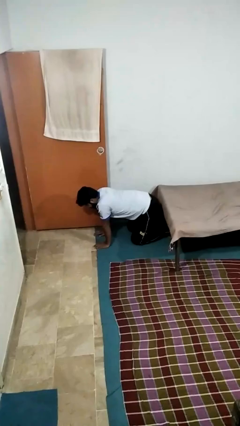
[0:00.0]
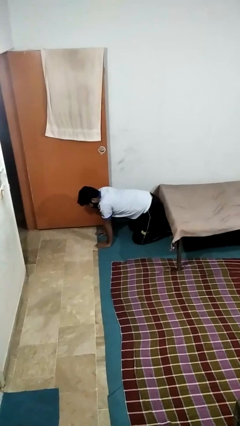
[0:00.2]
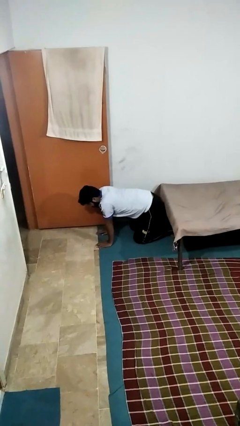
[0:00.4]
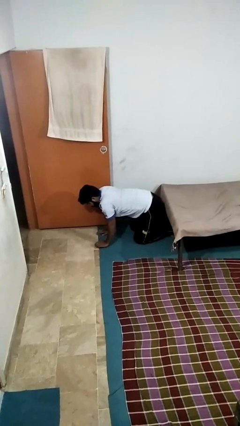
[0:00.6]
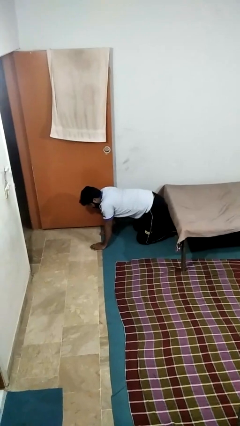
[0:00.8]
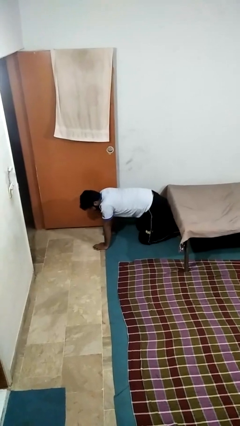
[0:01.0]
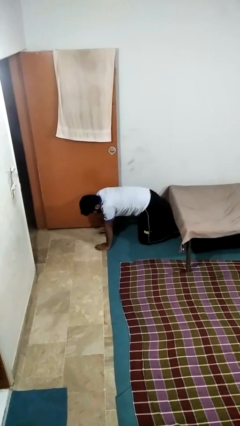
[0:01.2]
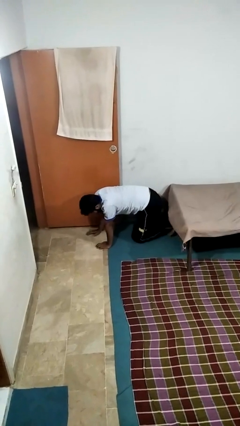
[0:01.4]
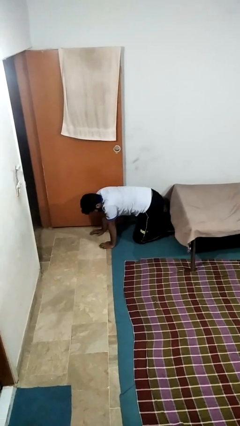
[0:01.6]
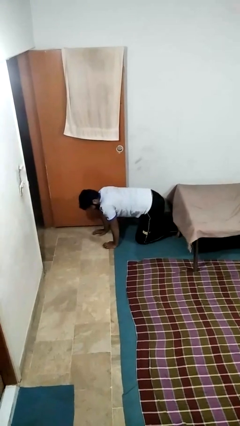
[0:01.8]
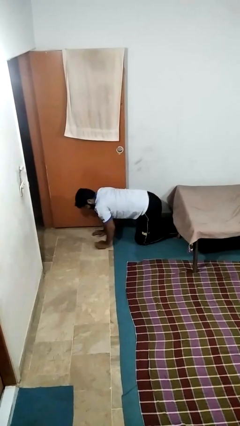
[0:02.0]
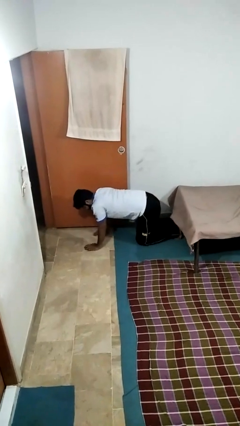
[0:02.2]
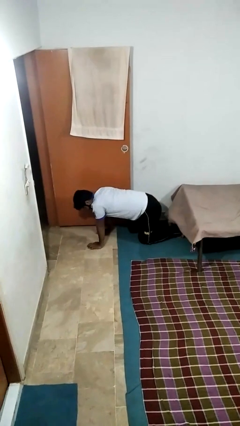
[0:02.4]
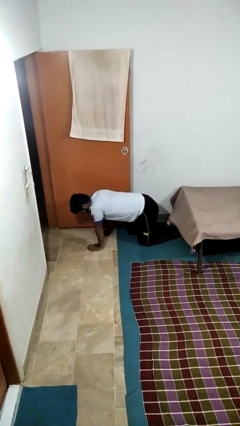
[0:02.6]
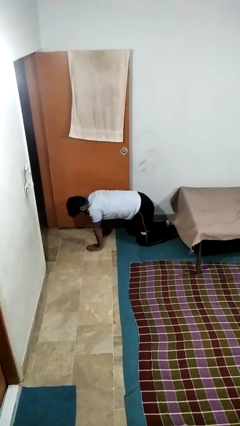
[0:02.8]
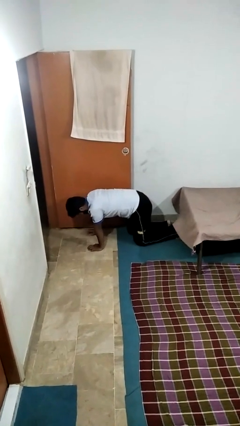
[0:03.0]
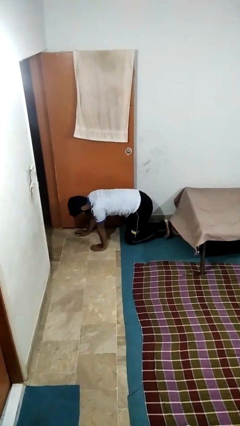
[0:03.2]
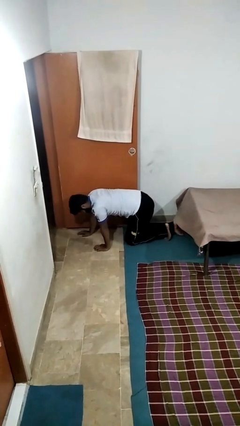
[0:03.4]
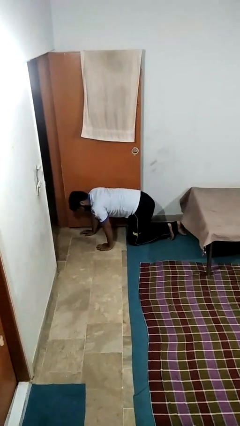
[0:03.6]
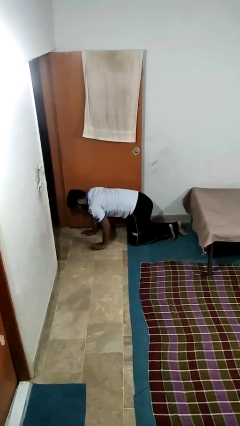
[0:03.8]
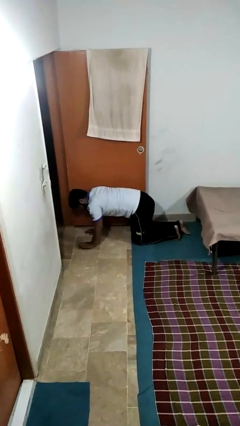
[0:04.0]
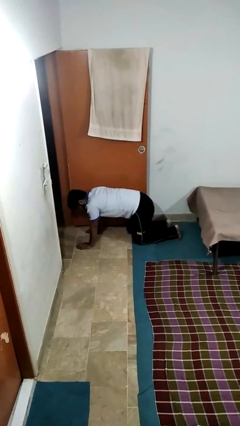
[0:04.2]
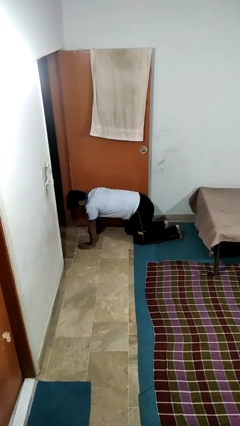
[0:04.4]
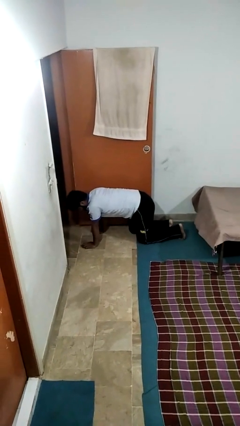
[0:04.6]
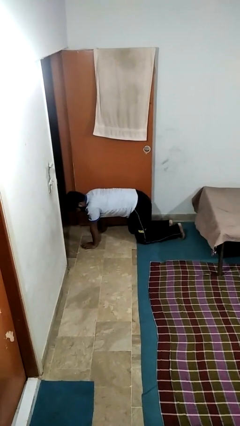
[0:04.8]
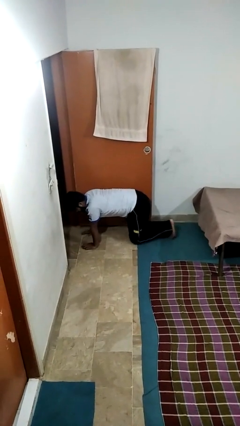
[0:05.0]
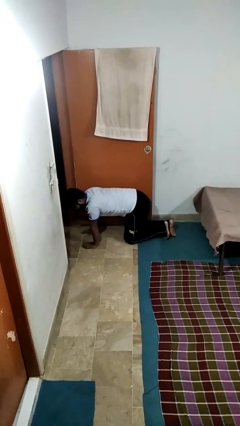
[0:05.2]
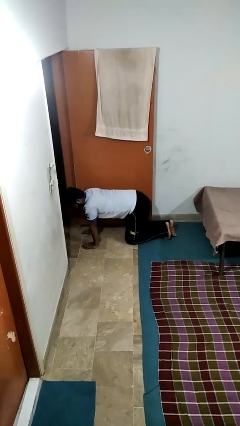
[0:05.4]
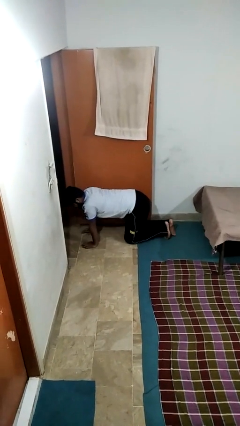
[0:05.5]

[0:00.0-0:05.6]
person crawls

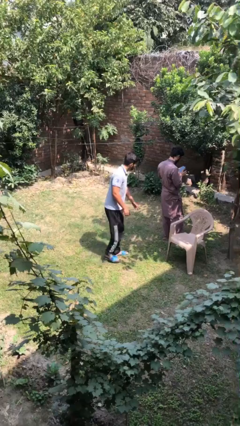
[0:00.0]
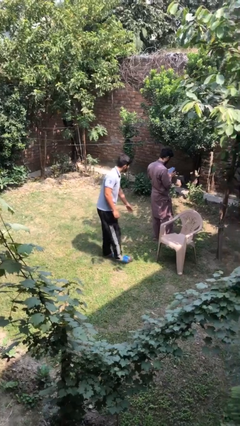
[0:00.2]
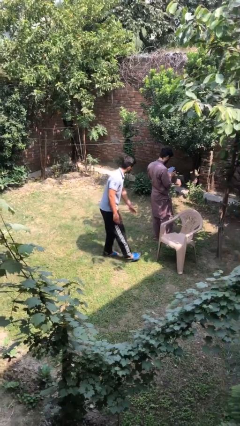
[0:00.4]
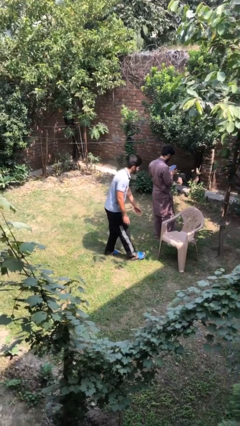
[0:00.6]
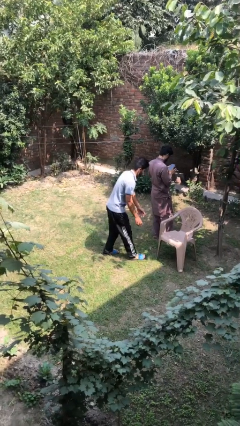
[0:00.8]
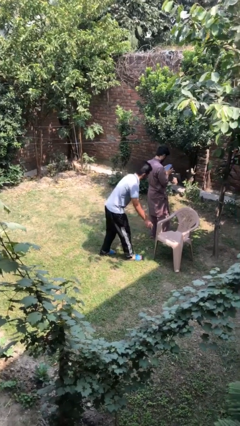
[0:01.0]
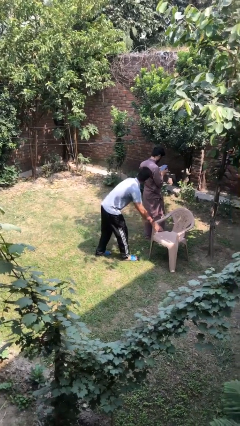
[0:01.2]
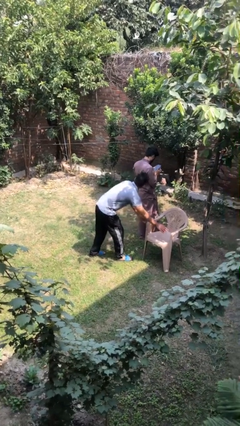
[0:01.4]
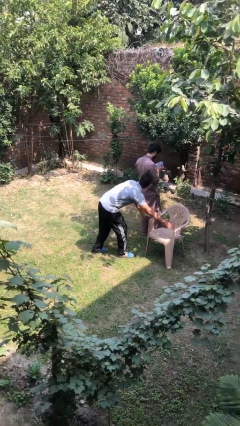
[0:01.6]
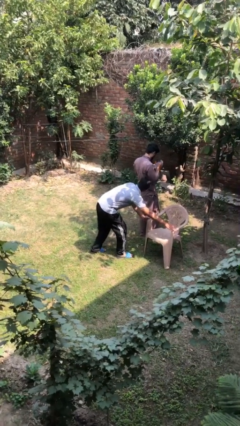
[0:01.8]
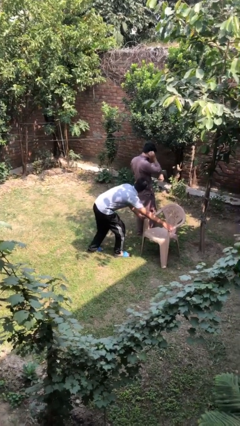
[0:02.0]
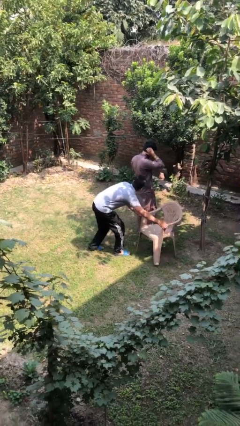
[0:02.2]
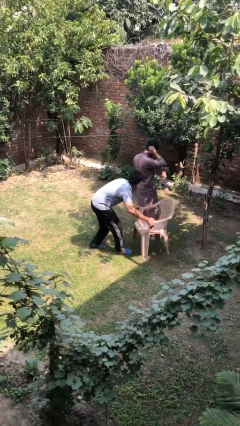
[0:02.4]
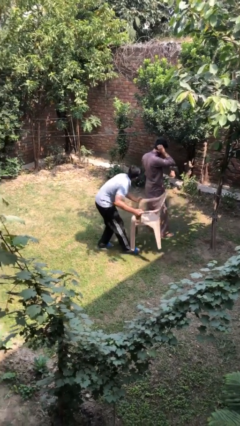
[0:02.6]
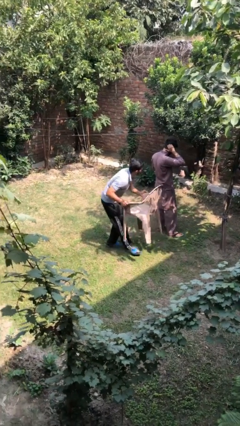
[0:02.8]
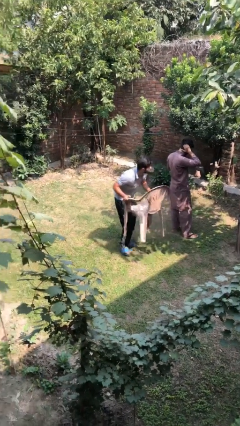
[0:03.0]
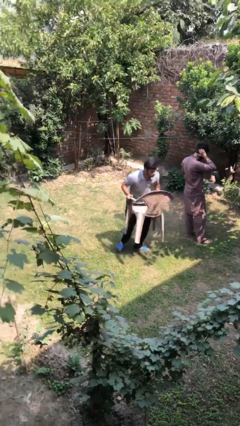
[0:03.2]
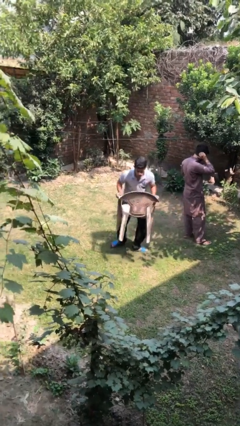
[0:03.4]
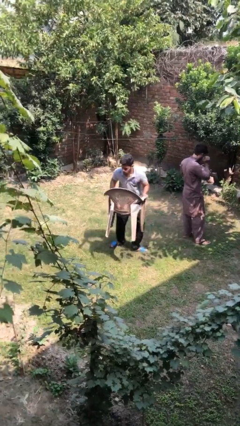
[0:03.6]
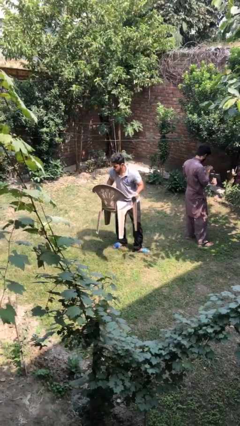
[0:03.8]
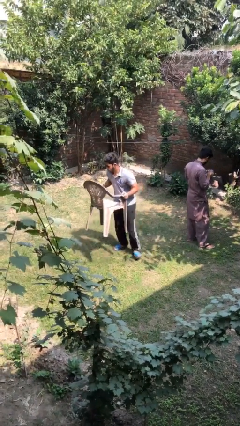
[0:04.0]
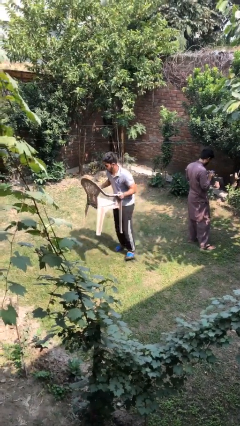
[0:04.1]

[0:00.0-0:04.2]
person steals object from person

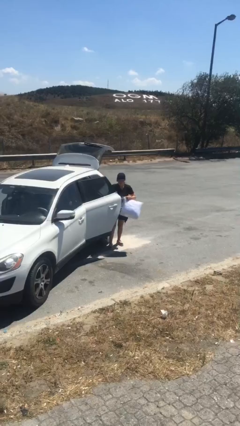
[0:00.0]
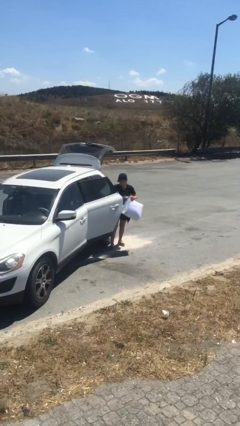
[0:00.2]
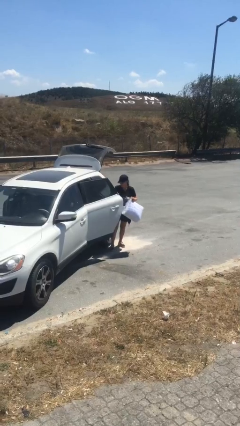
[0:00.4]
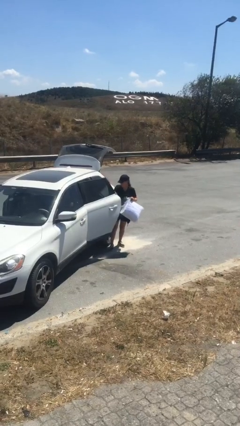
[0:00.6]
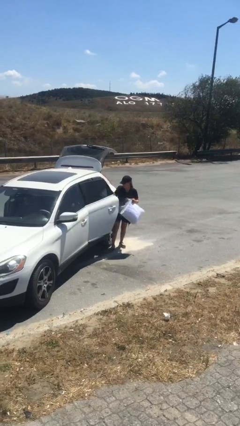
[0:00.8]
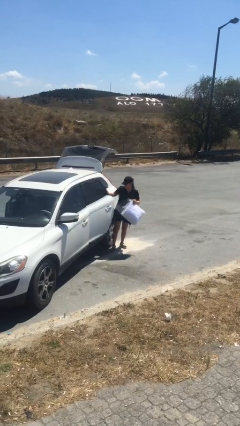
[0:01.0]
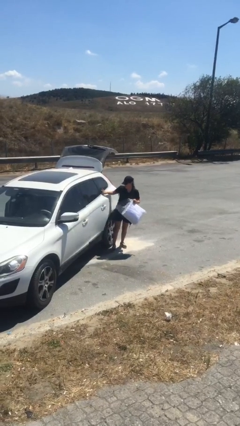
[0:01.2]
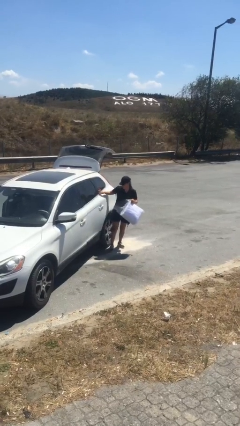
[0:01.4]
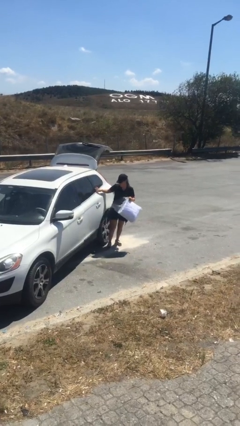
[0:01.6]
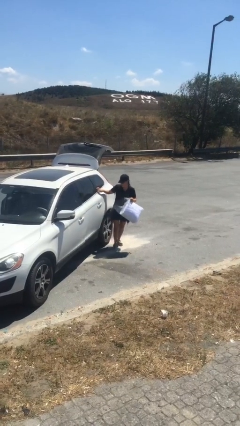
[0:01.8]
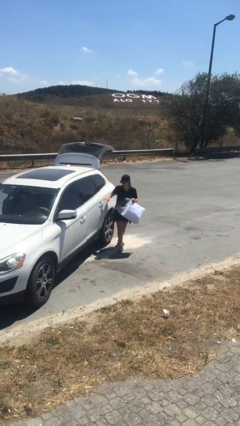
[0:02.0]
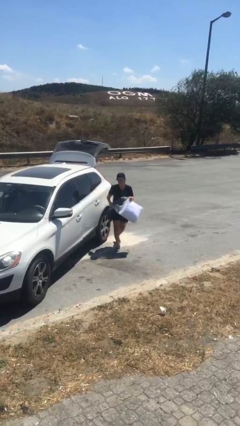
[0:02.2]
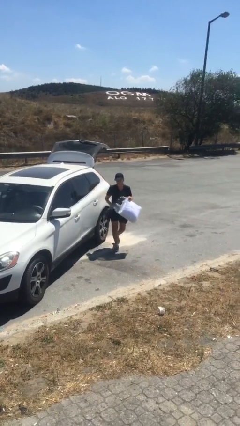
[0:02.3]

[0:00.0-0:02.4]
person closes car door

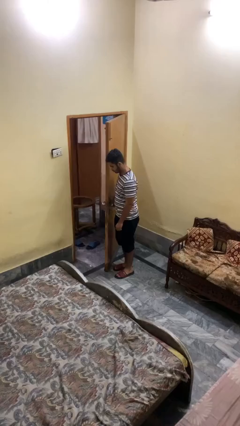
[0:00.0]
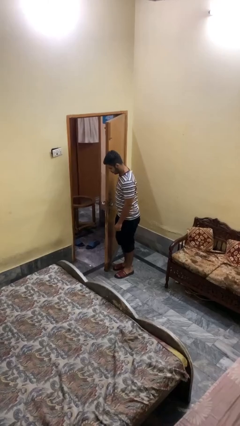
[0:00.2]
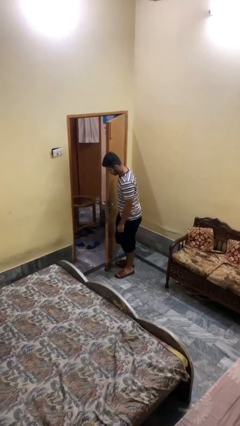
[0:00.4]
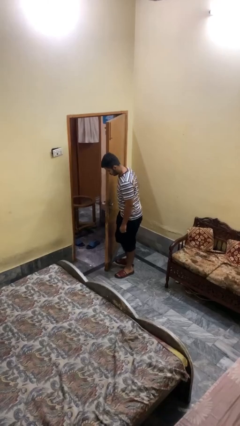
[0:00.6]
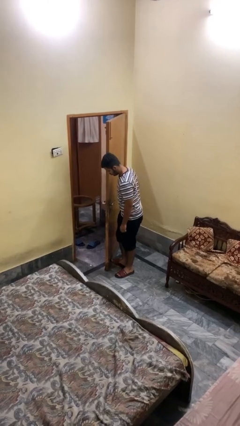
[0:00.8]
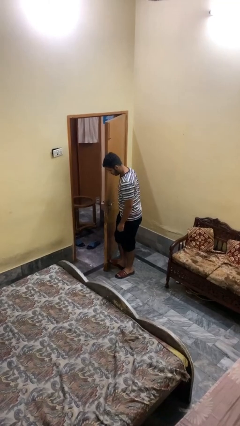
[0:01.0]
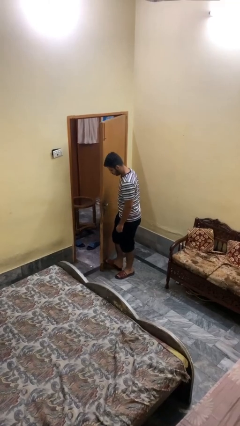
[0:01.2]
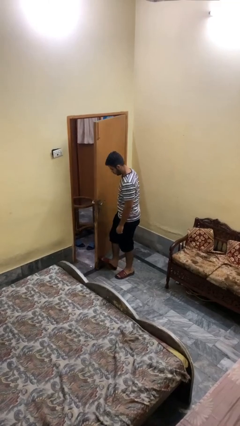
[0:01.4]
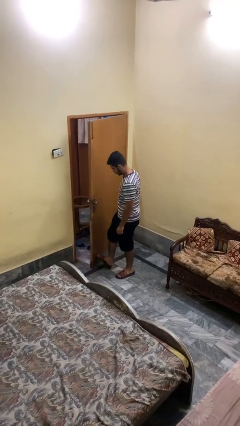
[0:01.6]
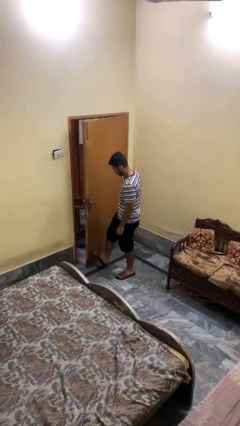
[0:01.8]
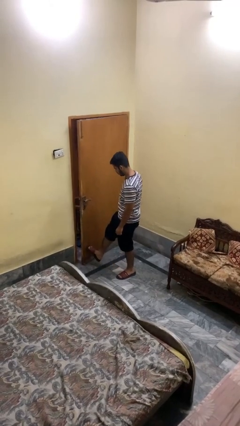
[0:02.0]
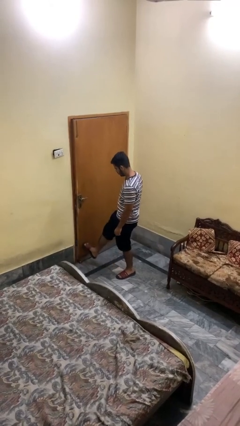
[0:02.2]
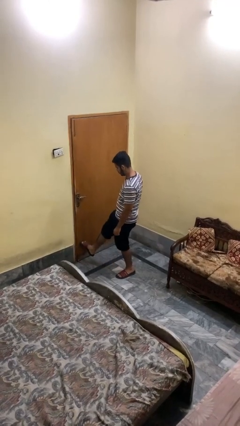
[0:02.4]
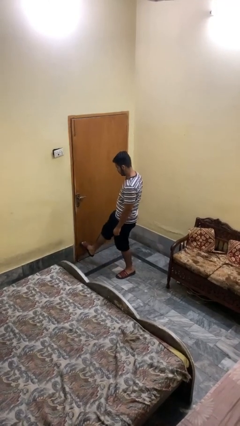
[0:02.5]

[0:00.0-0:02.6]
person closes door with foot

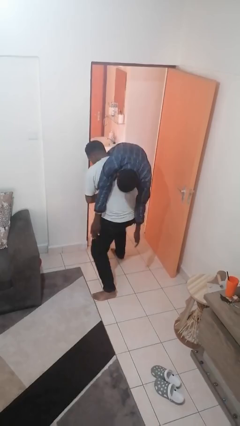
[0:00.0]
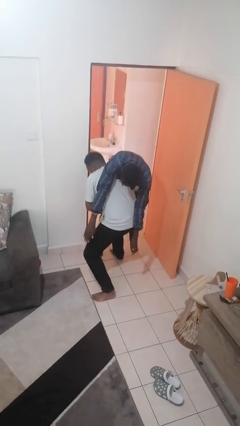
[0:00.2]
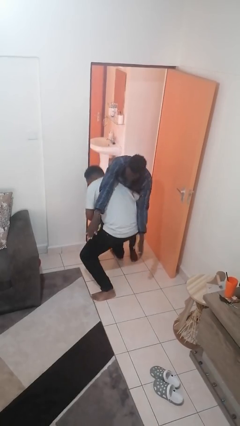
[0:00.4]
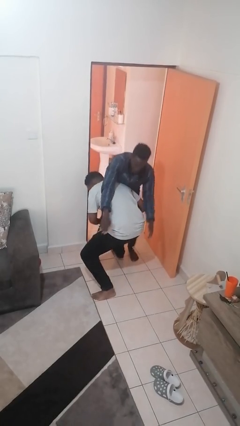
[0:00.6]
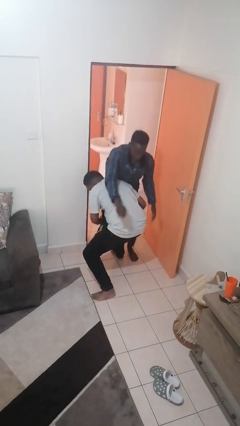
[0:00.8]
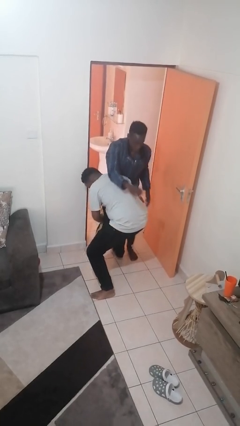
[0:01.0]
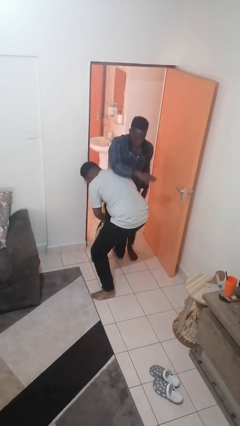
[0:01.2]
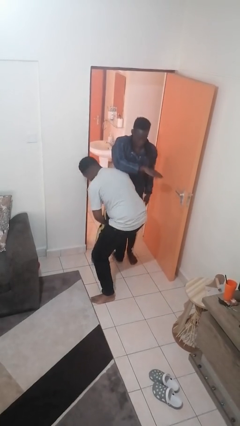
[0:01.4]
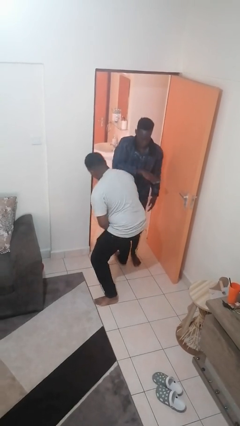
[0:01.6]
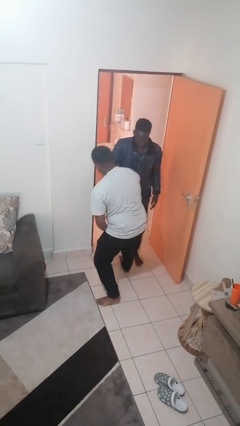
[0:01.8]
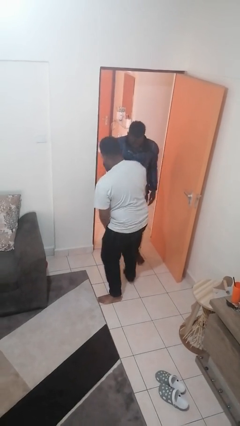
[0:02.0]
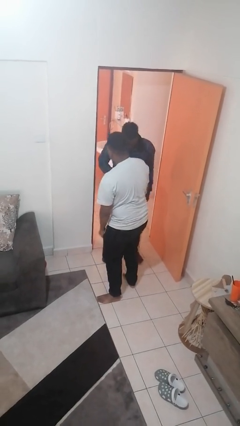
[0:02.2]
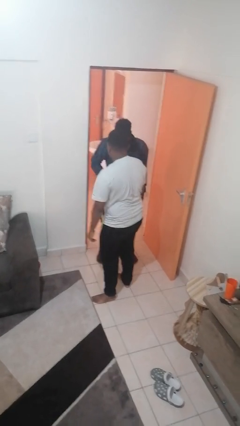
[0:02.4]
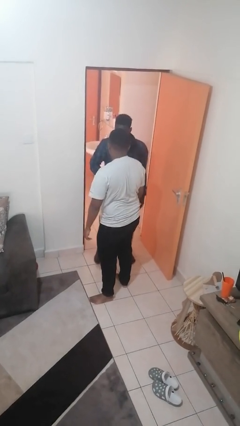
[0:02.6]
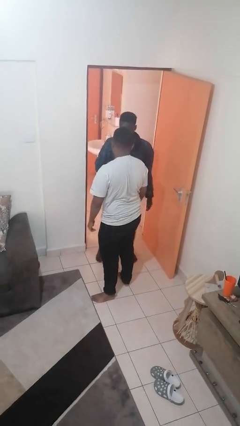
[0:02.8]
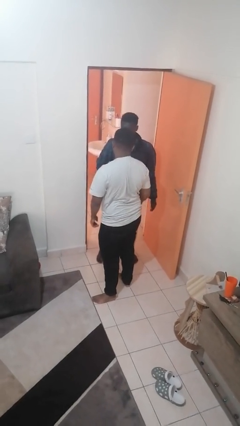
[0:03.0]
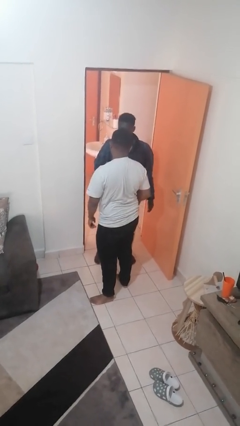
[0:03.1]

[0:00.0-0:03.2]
person puts down person
